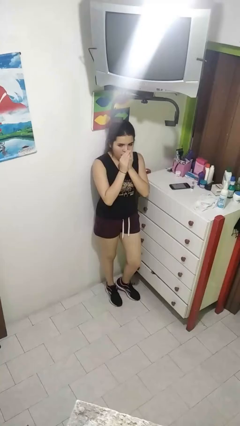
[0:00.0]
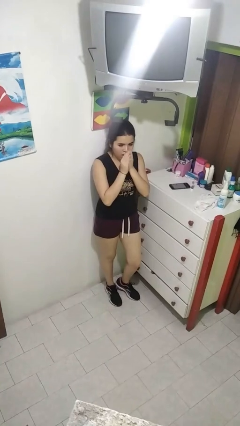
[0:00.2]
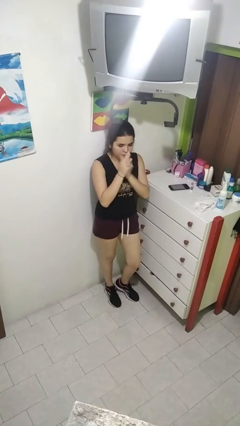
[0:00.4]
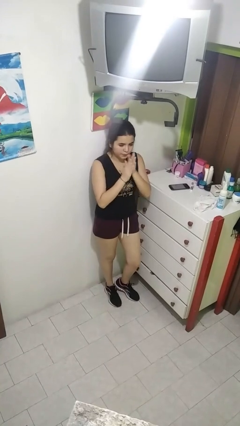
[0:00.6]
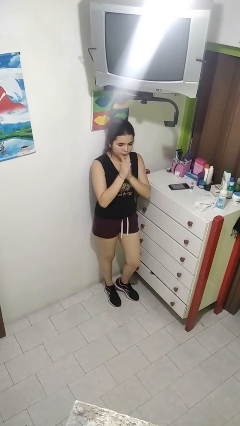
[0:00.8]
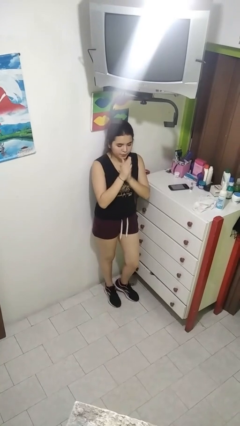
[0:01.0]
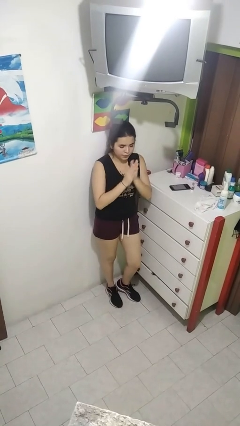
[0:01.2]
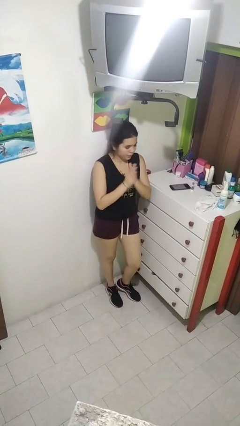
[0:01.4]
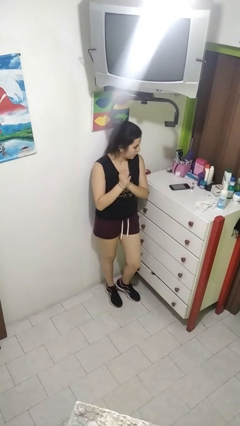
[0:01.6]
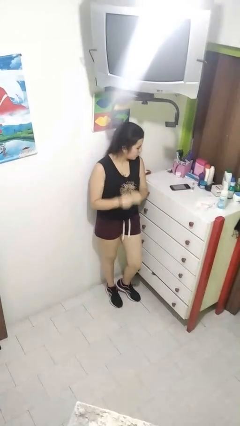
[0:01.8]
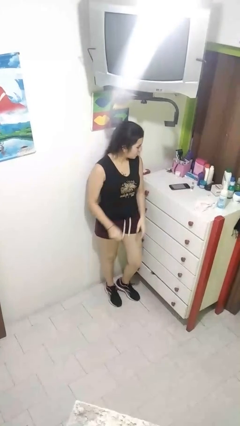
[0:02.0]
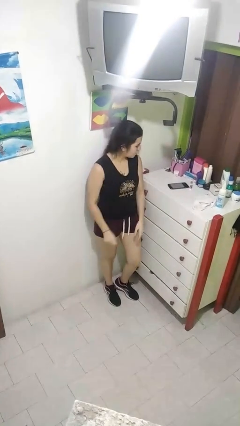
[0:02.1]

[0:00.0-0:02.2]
person blows into hands

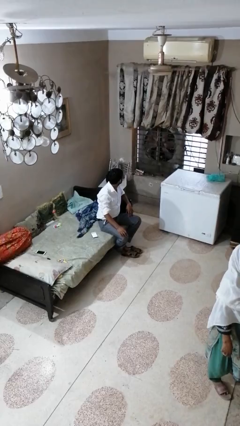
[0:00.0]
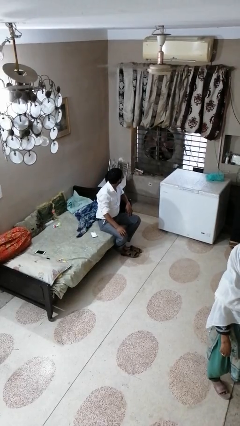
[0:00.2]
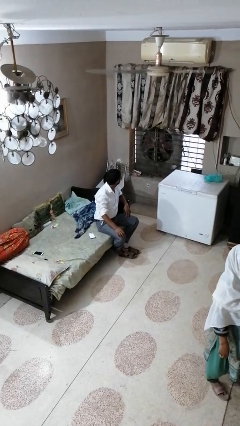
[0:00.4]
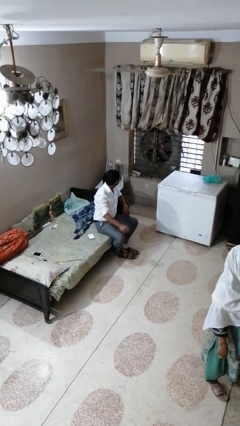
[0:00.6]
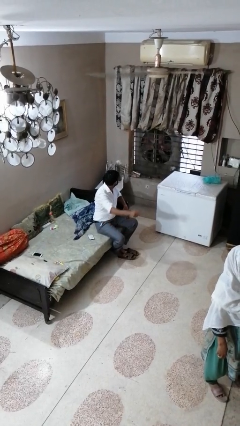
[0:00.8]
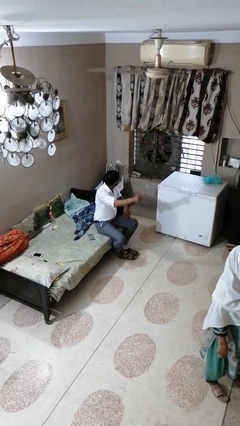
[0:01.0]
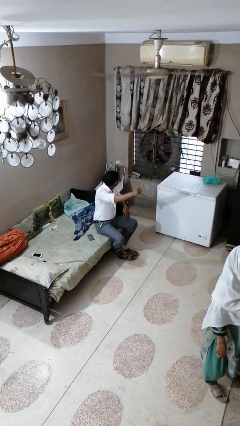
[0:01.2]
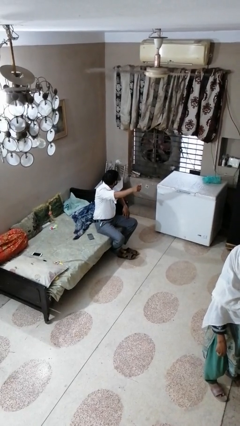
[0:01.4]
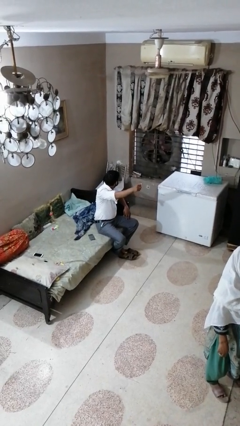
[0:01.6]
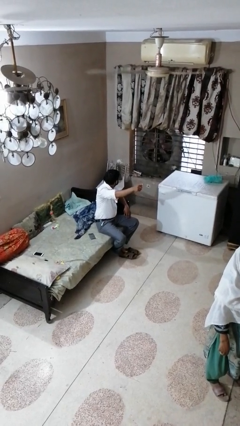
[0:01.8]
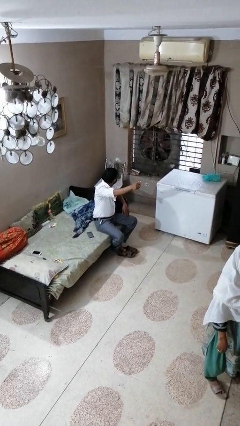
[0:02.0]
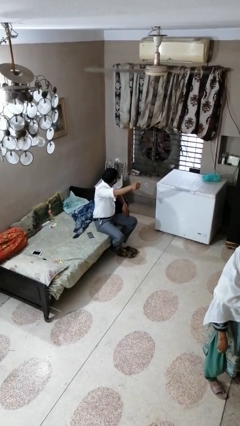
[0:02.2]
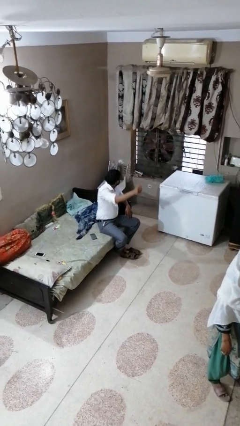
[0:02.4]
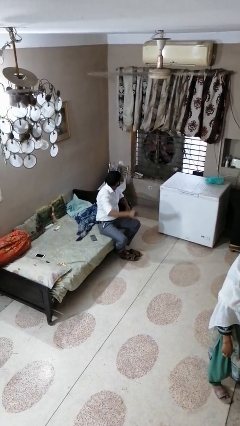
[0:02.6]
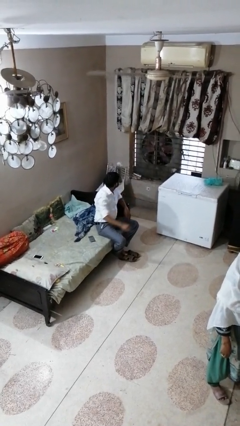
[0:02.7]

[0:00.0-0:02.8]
person points at person

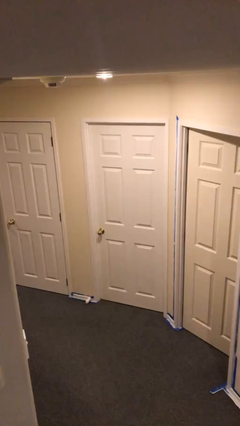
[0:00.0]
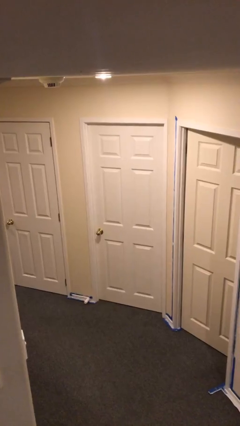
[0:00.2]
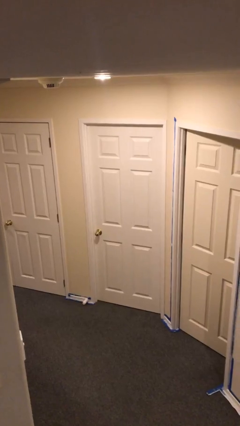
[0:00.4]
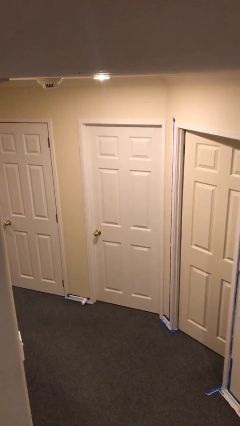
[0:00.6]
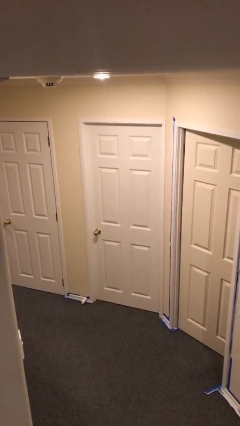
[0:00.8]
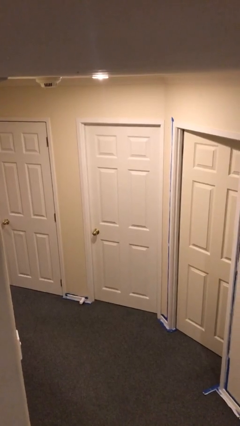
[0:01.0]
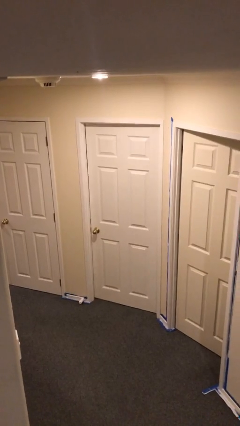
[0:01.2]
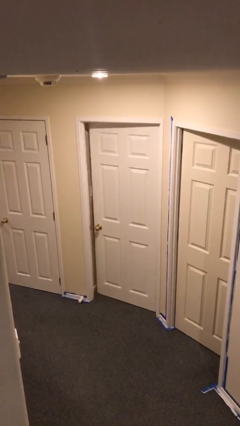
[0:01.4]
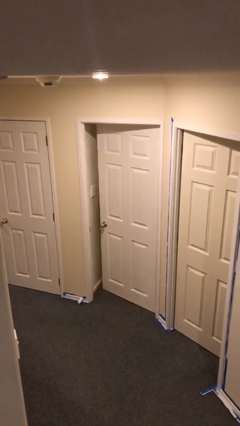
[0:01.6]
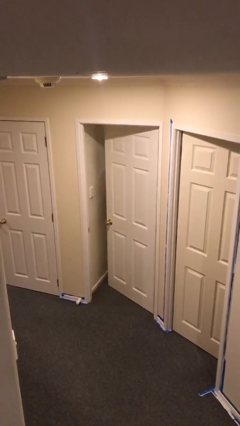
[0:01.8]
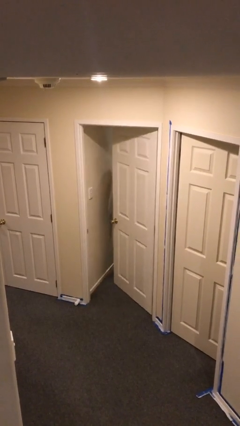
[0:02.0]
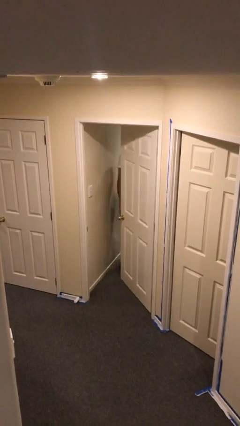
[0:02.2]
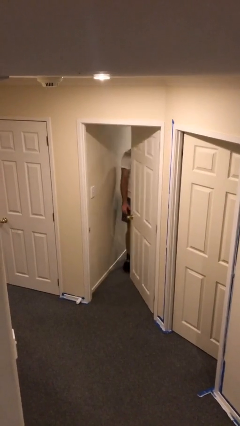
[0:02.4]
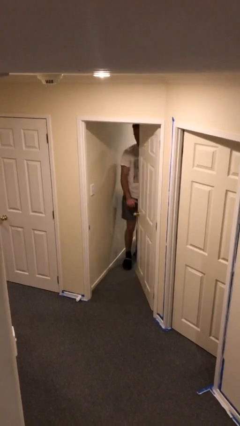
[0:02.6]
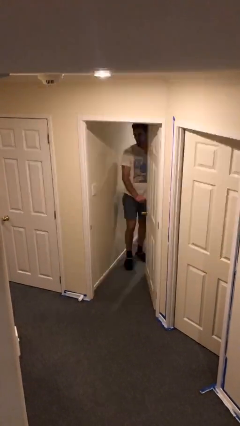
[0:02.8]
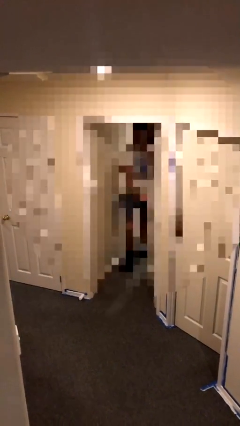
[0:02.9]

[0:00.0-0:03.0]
person opens facility door

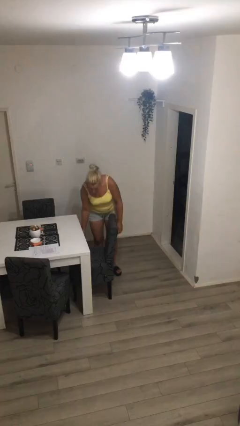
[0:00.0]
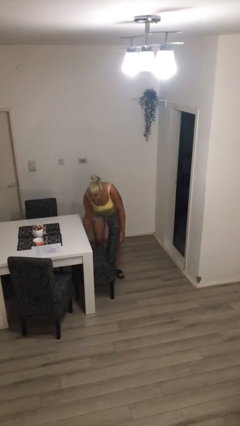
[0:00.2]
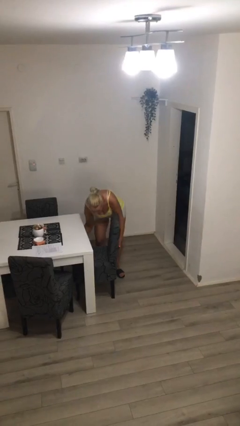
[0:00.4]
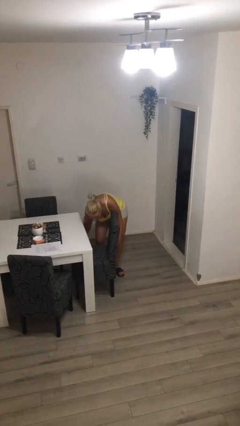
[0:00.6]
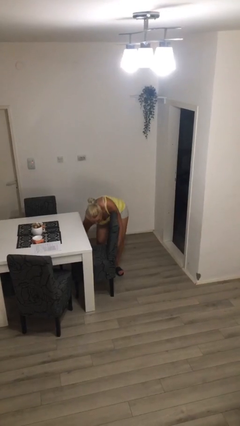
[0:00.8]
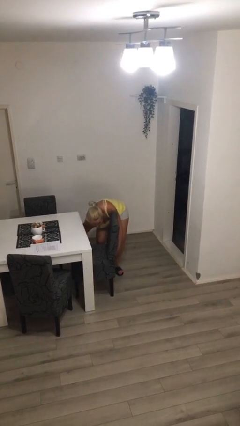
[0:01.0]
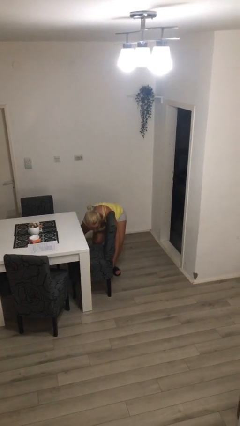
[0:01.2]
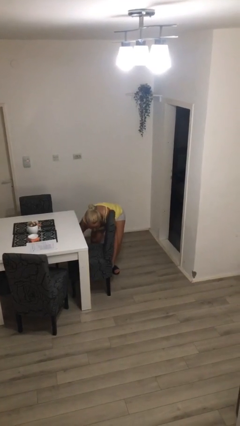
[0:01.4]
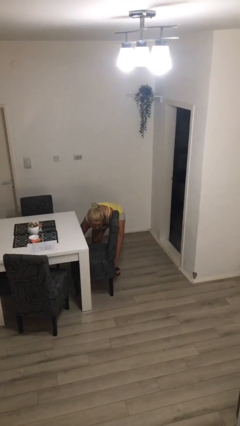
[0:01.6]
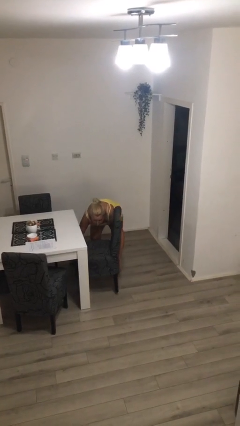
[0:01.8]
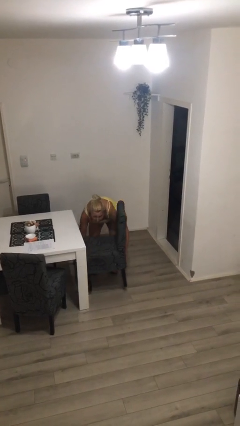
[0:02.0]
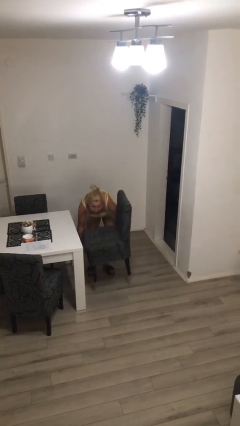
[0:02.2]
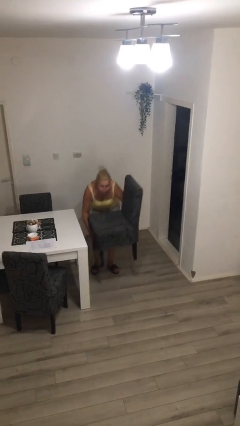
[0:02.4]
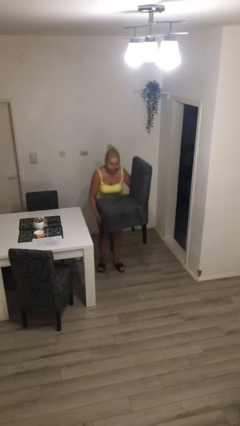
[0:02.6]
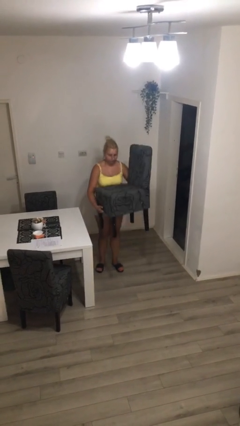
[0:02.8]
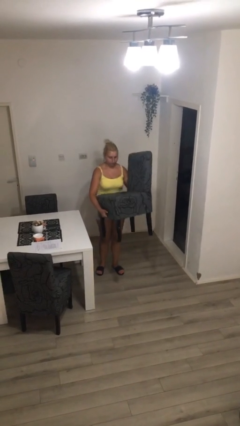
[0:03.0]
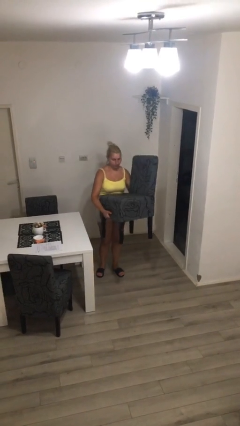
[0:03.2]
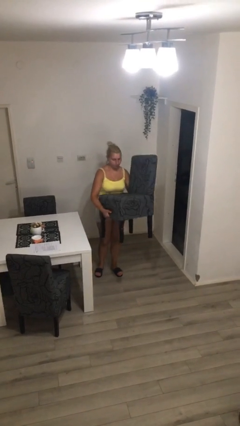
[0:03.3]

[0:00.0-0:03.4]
person picks up object from floor

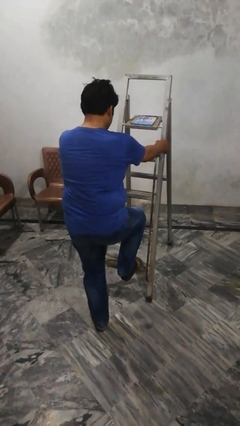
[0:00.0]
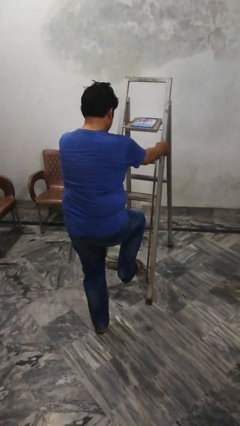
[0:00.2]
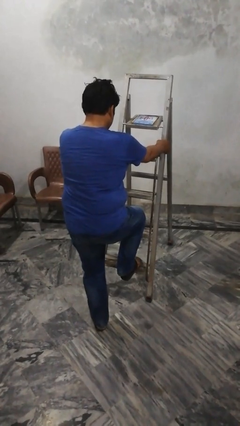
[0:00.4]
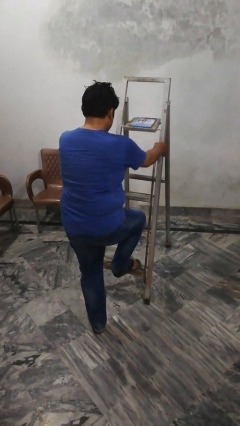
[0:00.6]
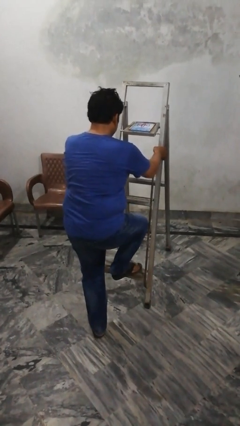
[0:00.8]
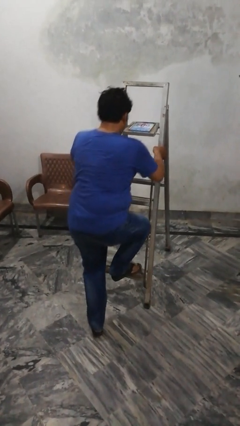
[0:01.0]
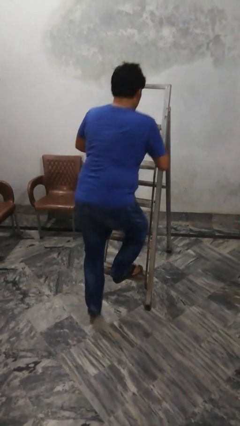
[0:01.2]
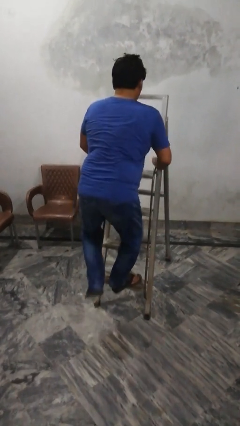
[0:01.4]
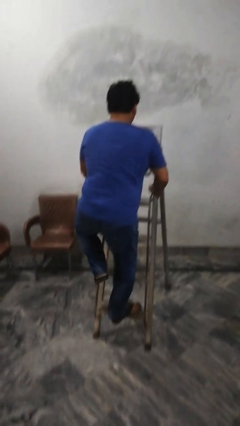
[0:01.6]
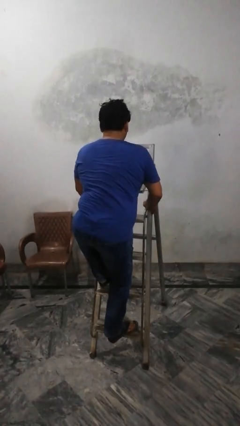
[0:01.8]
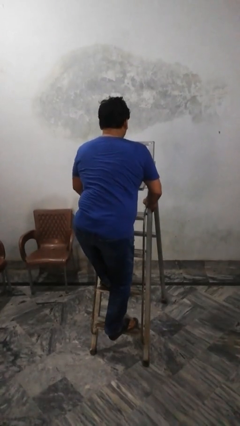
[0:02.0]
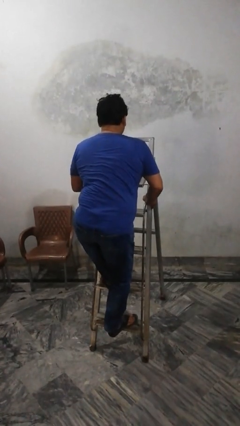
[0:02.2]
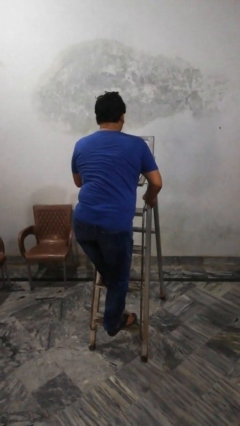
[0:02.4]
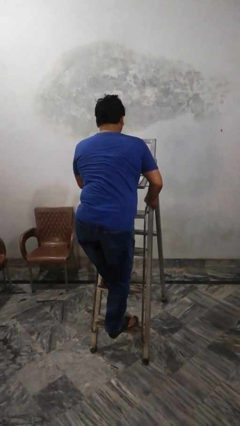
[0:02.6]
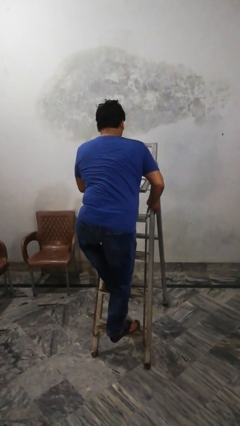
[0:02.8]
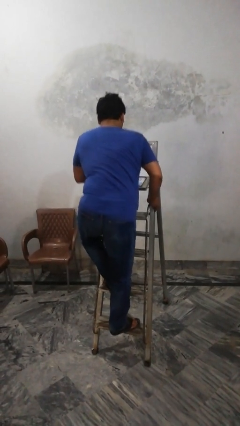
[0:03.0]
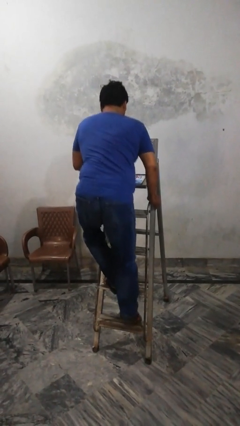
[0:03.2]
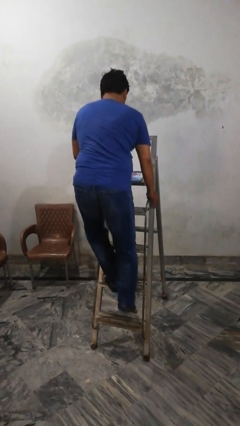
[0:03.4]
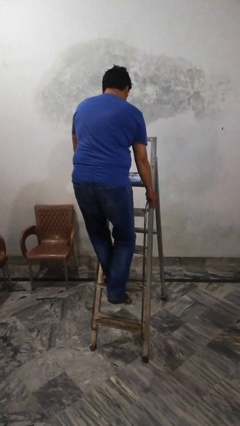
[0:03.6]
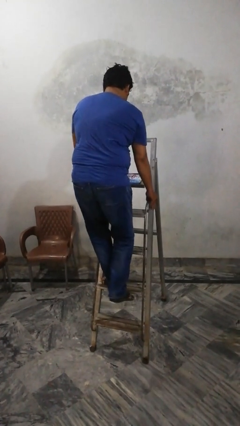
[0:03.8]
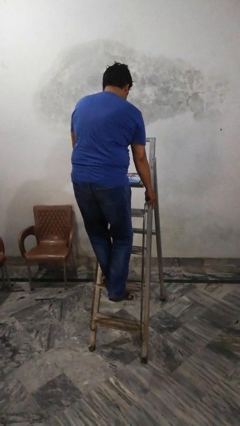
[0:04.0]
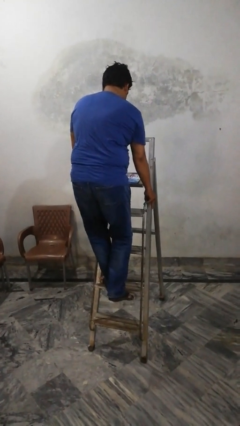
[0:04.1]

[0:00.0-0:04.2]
person climbs up ladder

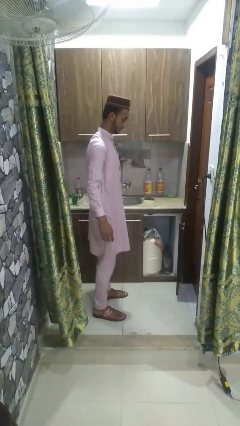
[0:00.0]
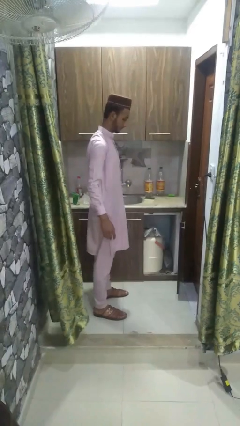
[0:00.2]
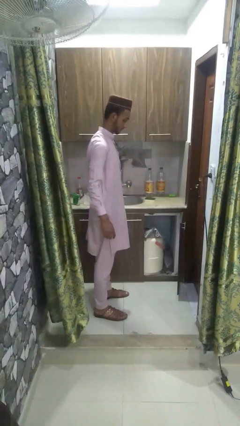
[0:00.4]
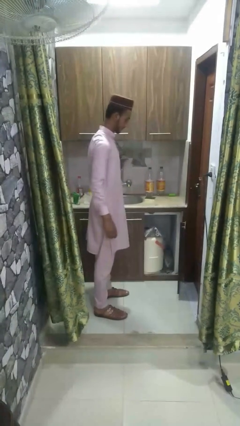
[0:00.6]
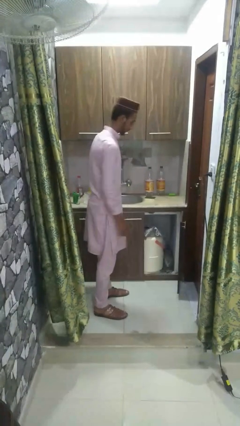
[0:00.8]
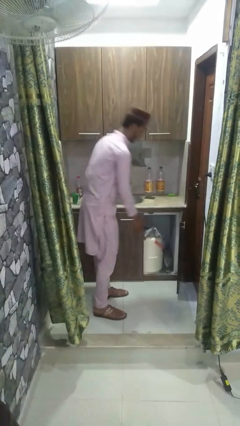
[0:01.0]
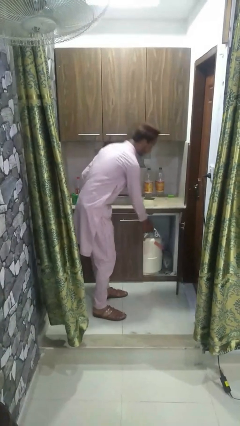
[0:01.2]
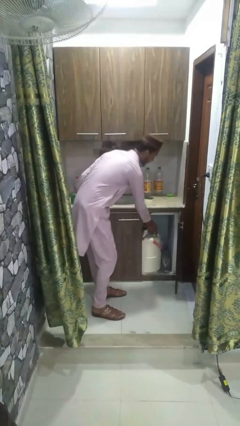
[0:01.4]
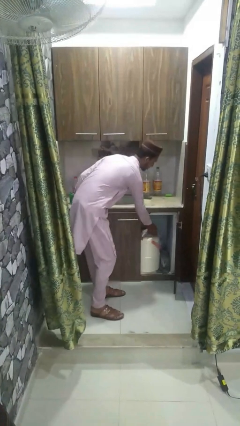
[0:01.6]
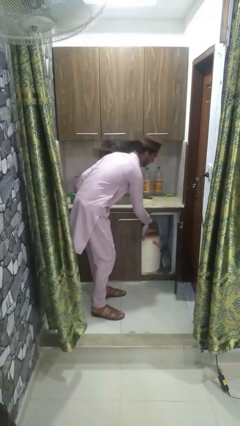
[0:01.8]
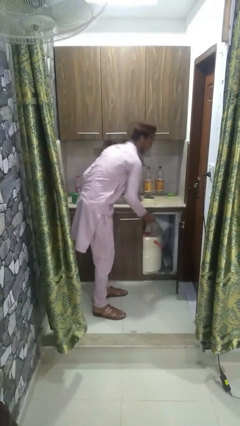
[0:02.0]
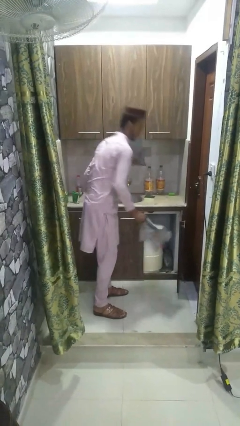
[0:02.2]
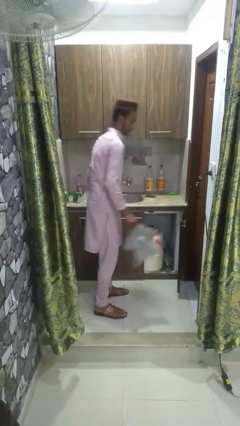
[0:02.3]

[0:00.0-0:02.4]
person unloads clotheswasher
